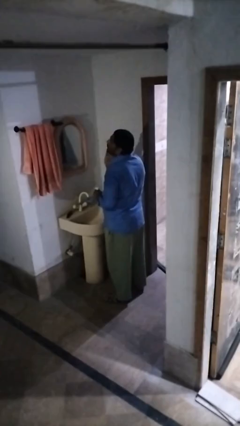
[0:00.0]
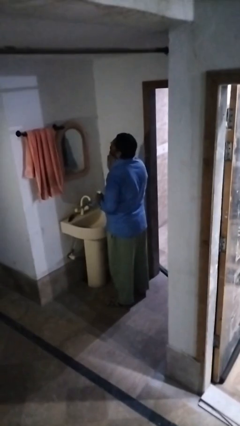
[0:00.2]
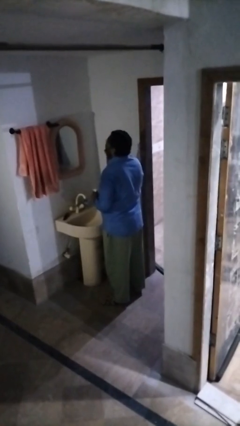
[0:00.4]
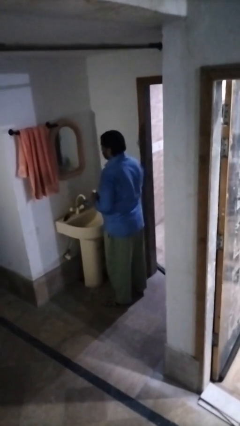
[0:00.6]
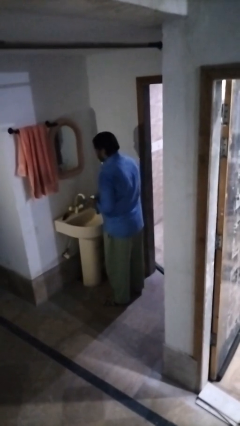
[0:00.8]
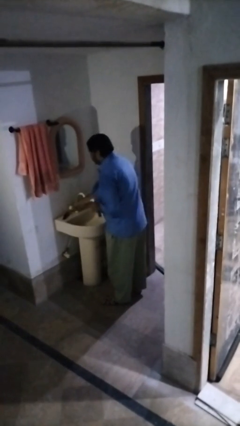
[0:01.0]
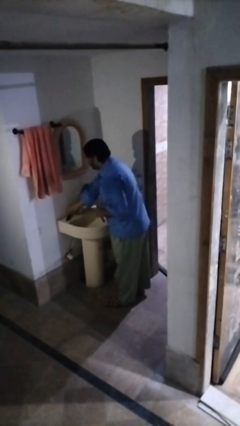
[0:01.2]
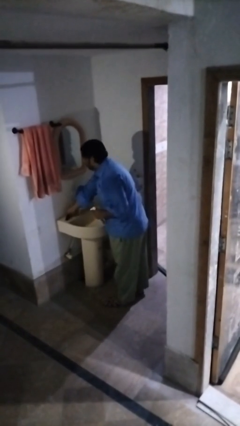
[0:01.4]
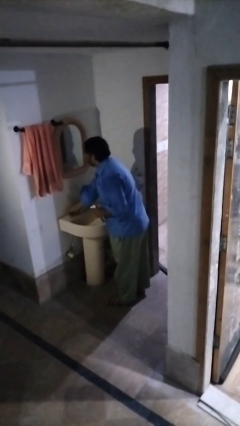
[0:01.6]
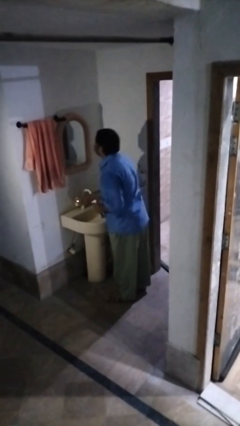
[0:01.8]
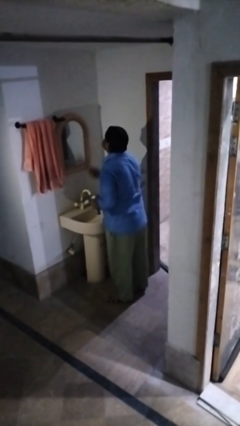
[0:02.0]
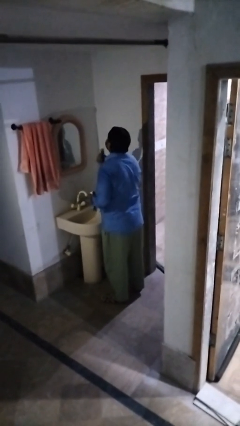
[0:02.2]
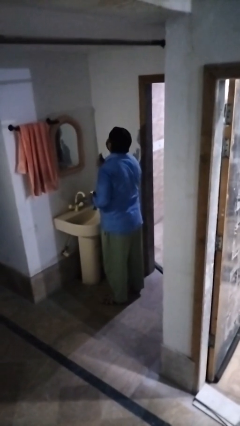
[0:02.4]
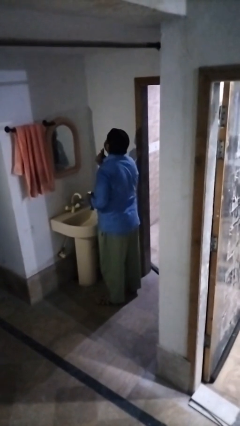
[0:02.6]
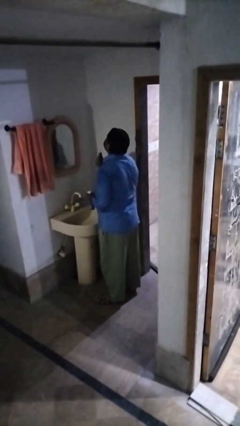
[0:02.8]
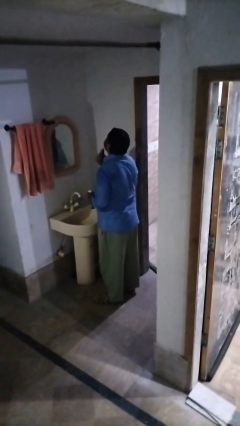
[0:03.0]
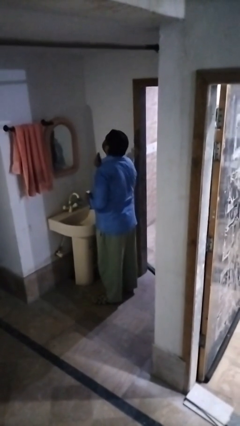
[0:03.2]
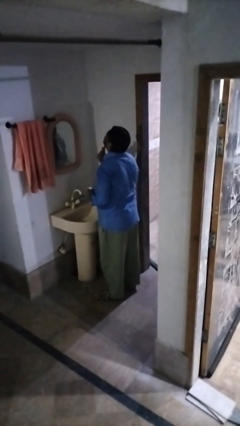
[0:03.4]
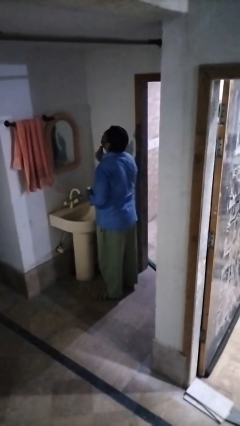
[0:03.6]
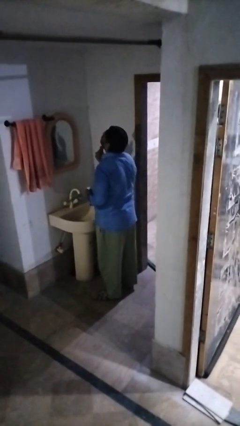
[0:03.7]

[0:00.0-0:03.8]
person shaves face

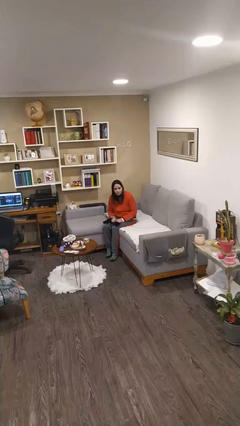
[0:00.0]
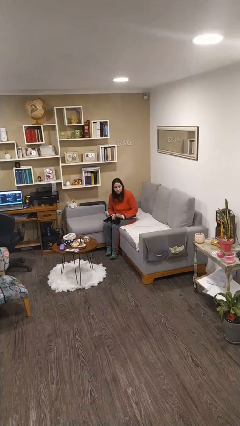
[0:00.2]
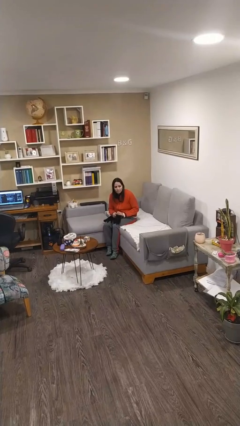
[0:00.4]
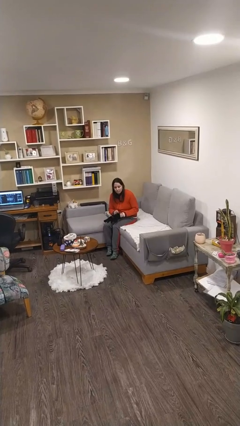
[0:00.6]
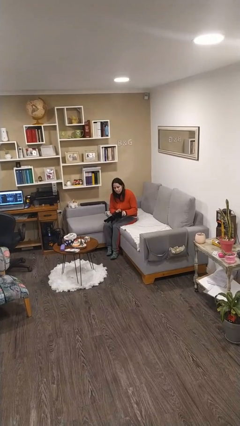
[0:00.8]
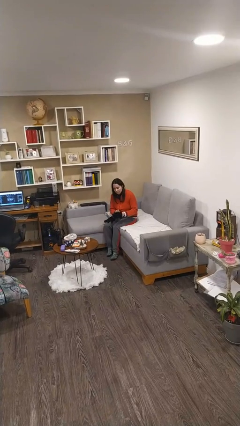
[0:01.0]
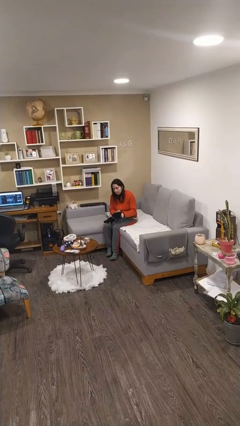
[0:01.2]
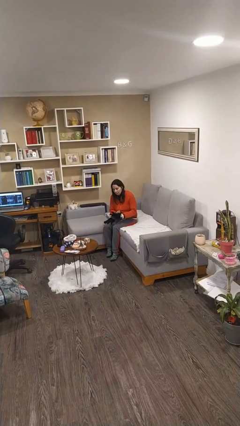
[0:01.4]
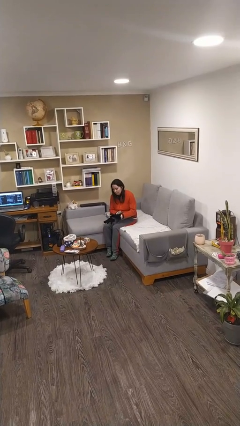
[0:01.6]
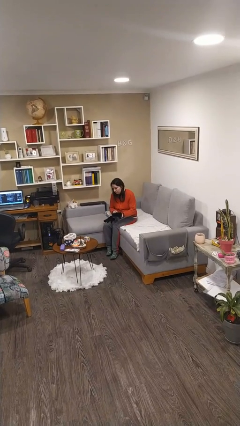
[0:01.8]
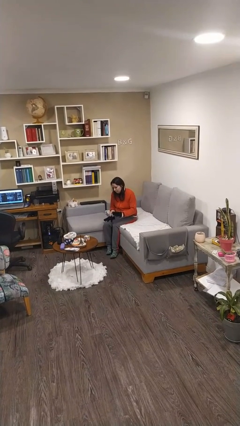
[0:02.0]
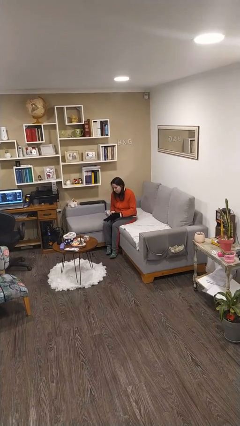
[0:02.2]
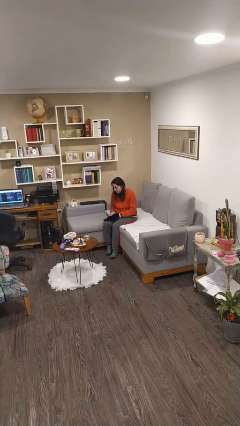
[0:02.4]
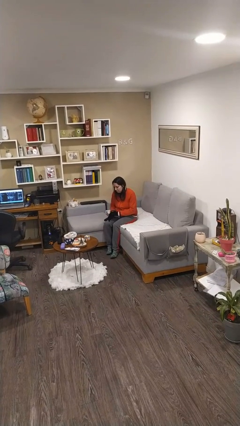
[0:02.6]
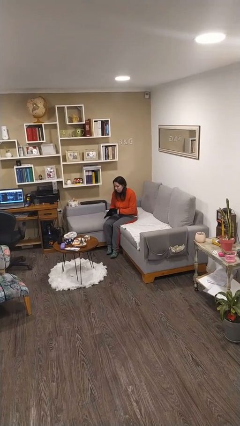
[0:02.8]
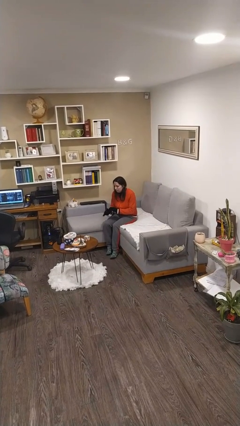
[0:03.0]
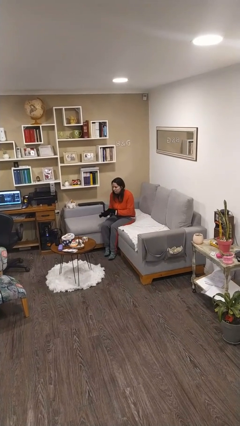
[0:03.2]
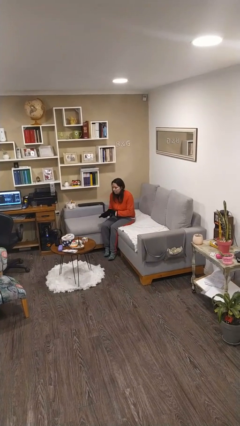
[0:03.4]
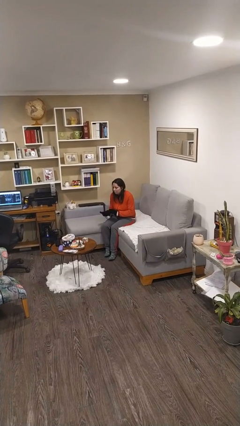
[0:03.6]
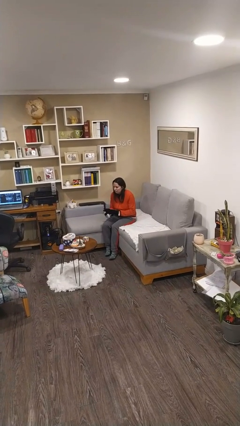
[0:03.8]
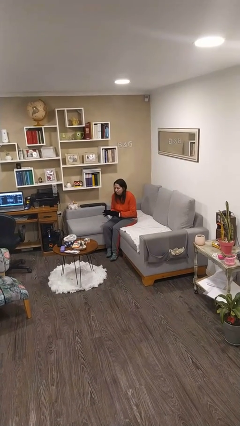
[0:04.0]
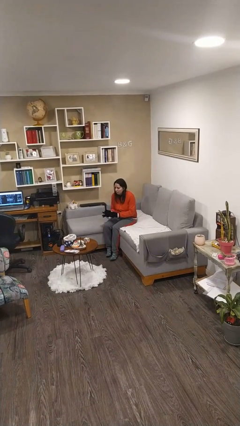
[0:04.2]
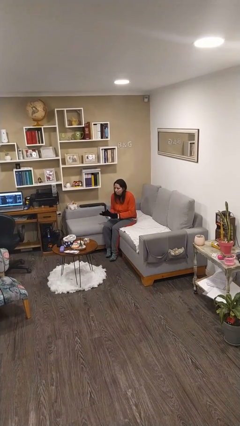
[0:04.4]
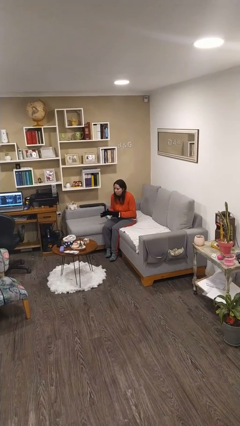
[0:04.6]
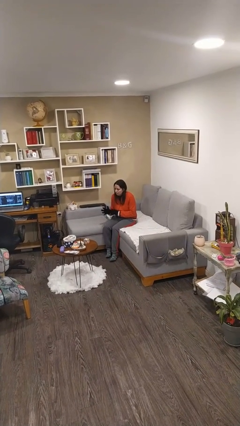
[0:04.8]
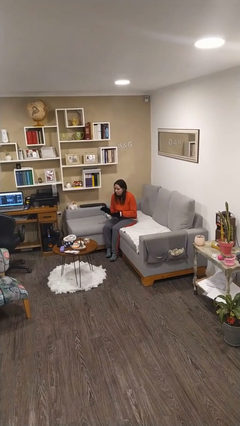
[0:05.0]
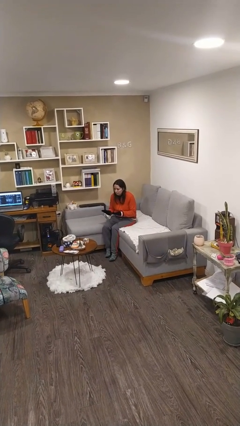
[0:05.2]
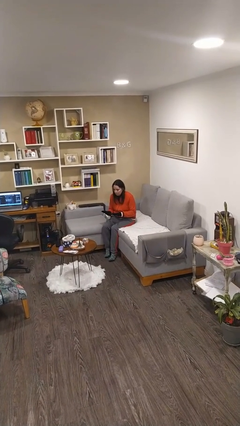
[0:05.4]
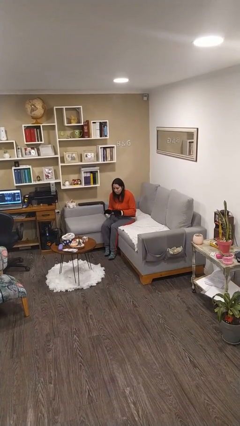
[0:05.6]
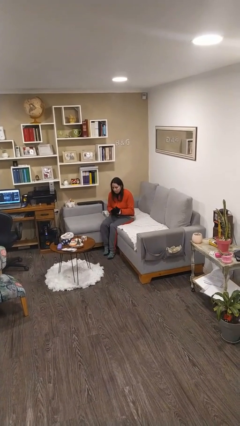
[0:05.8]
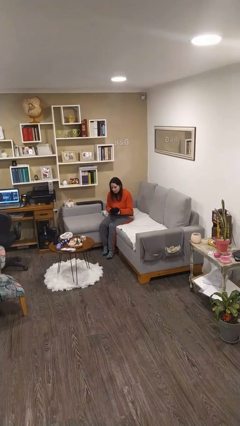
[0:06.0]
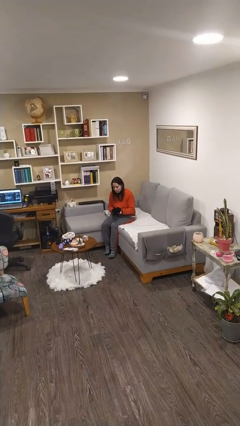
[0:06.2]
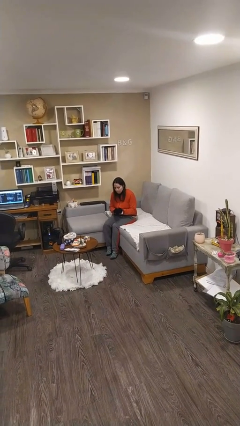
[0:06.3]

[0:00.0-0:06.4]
person puts on gloves

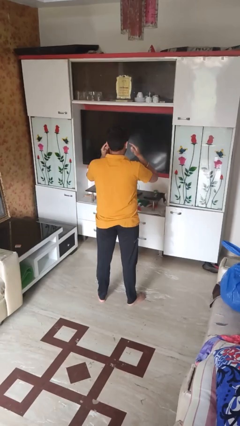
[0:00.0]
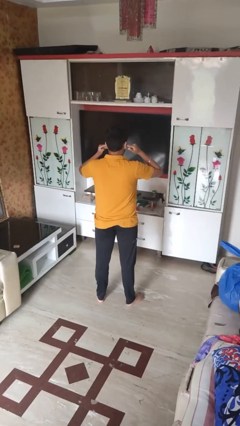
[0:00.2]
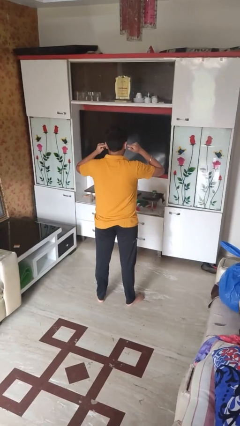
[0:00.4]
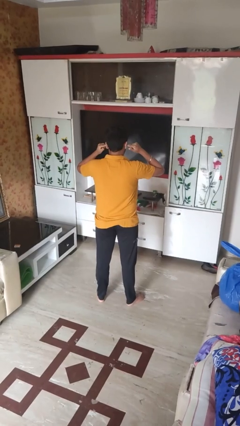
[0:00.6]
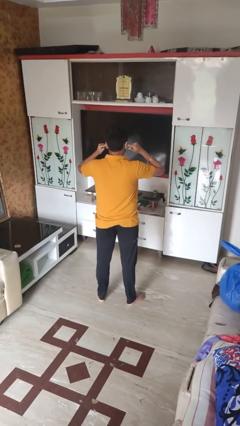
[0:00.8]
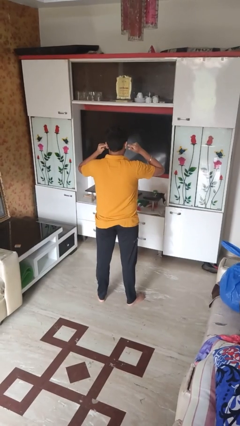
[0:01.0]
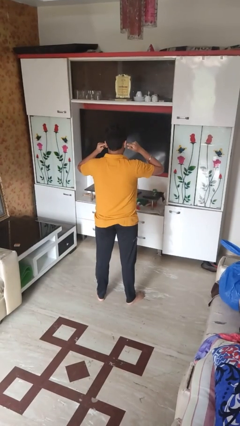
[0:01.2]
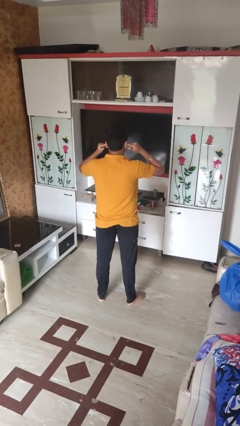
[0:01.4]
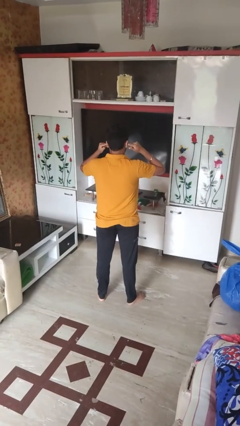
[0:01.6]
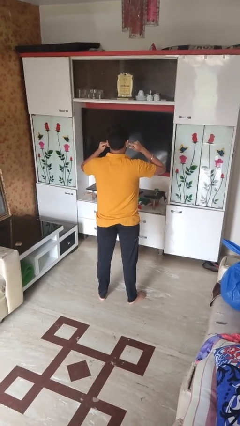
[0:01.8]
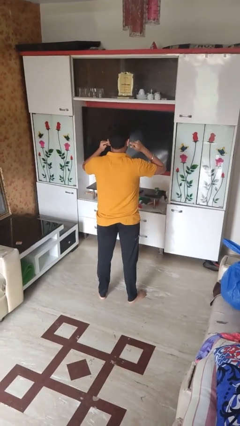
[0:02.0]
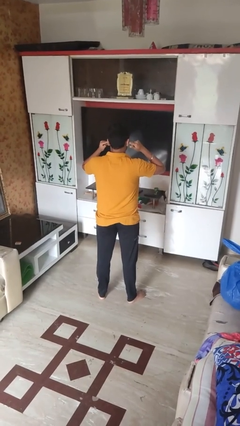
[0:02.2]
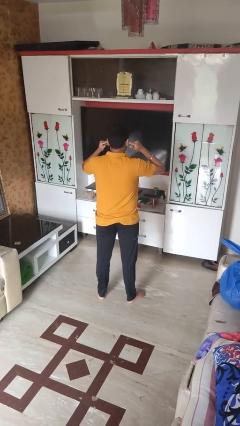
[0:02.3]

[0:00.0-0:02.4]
person puts fingers in ear

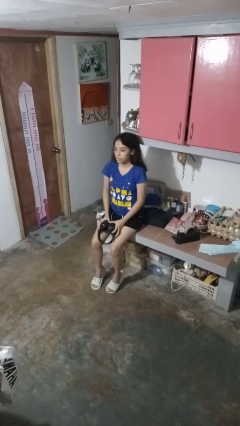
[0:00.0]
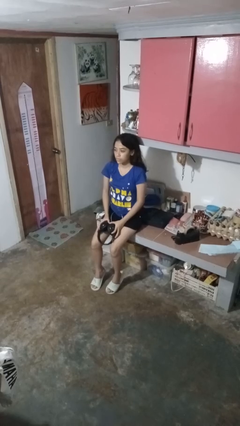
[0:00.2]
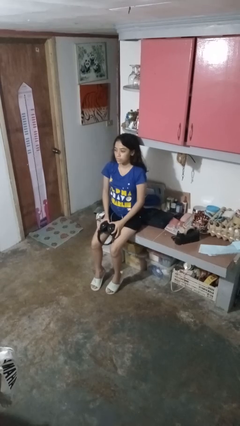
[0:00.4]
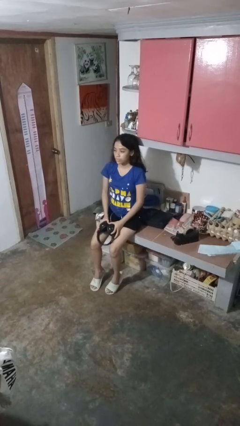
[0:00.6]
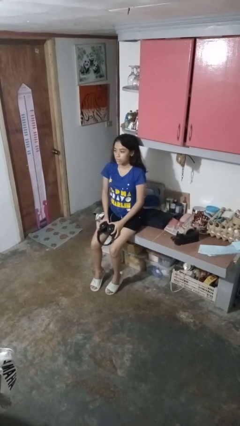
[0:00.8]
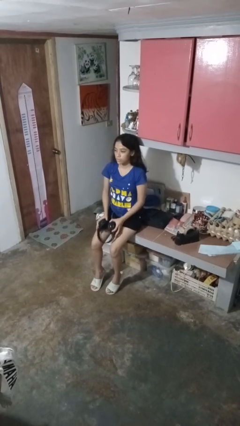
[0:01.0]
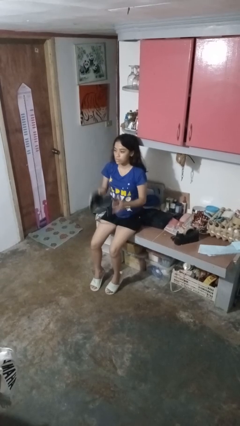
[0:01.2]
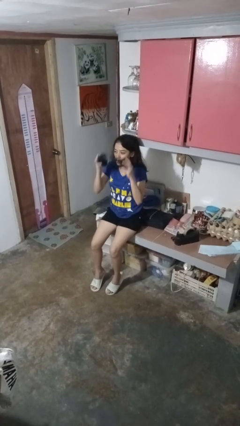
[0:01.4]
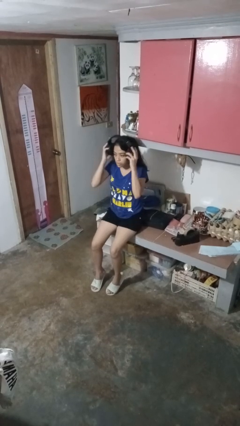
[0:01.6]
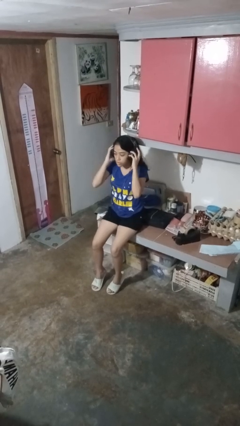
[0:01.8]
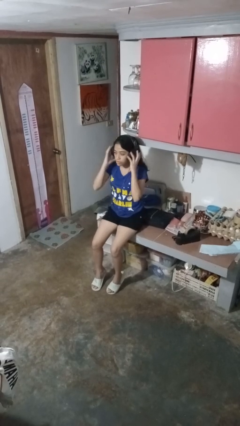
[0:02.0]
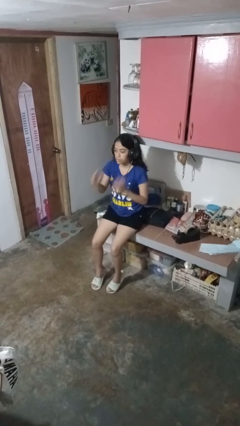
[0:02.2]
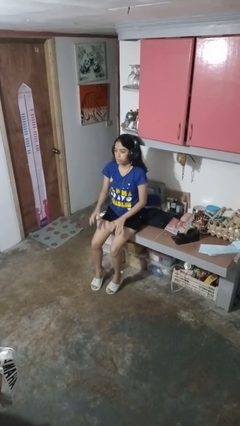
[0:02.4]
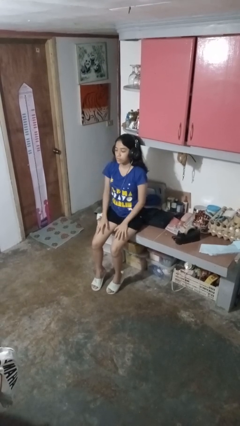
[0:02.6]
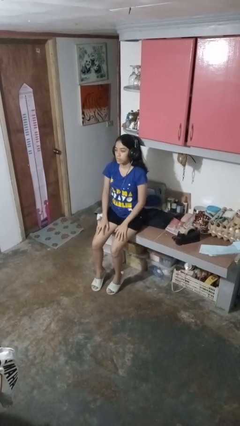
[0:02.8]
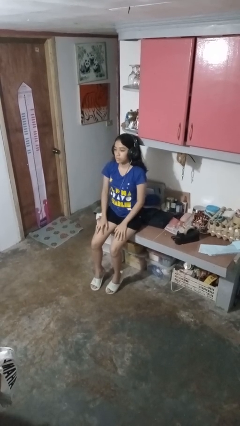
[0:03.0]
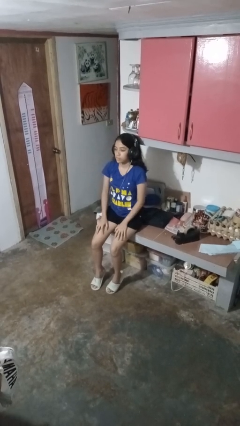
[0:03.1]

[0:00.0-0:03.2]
person puts on headphones

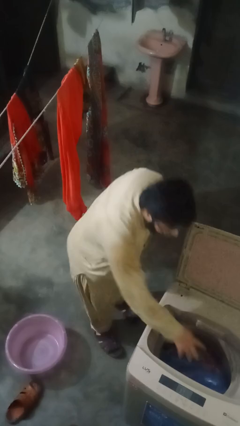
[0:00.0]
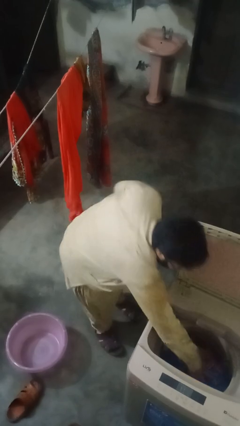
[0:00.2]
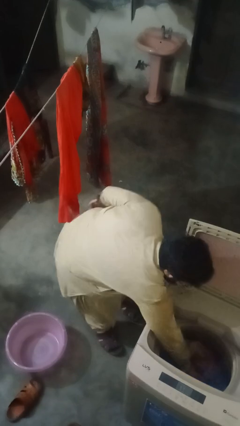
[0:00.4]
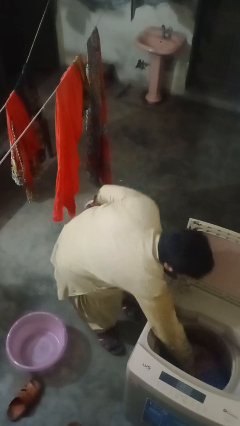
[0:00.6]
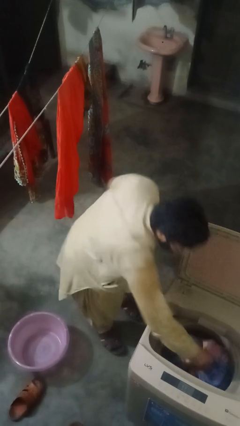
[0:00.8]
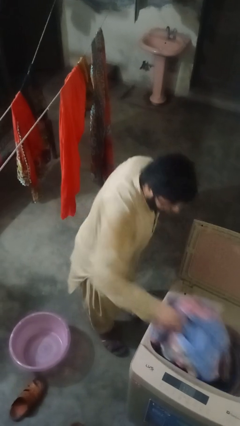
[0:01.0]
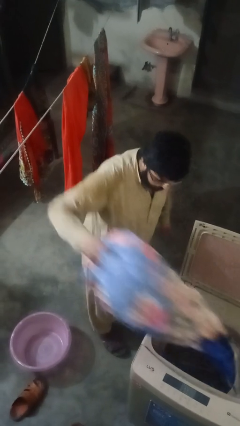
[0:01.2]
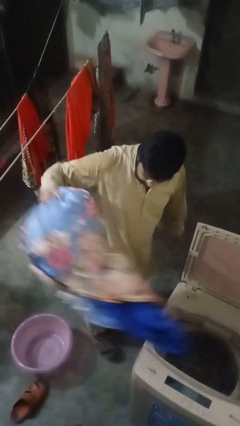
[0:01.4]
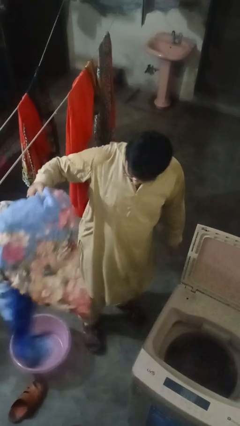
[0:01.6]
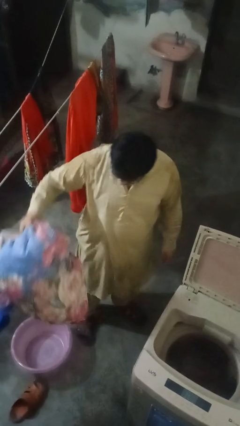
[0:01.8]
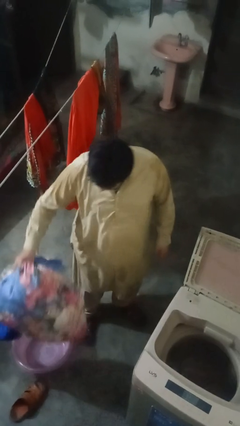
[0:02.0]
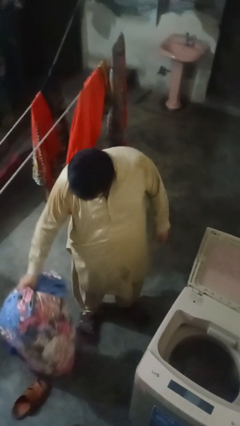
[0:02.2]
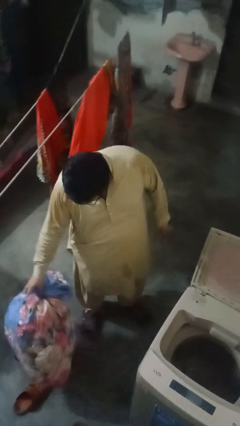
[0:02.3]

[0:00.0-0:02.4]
person loads clotheswasher
